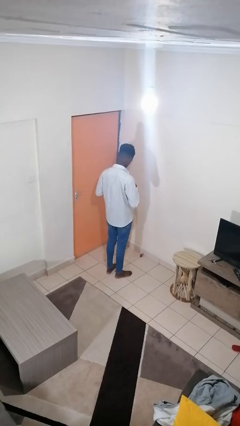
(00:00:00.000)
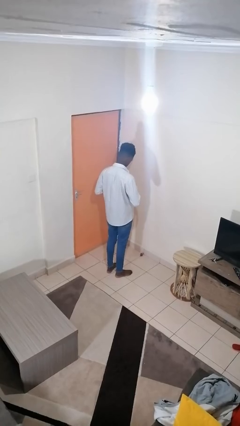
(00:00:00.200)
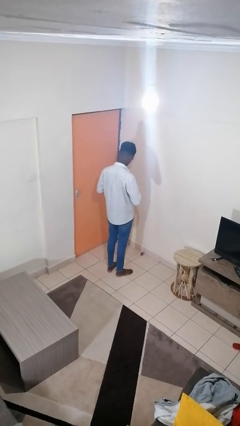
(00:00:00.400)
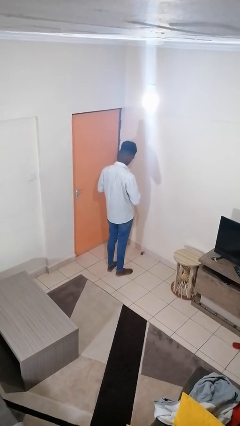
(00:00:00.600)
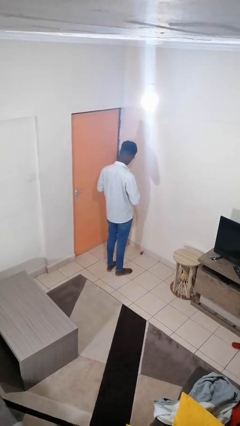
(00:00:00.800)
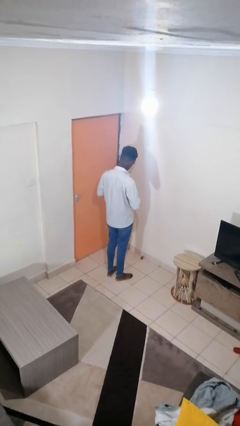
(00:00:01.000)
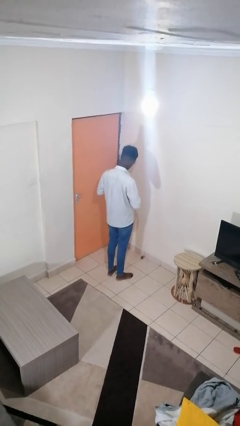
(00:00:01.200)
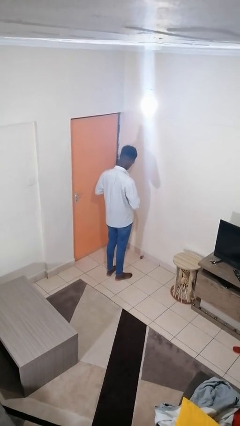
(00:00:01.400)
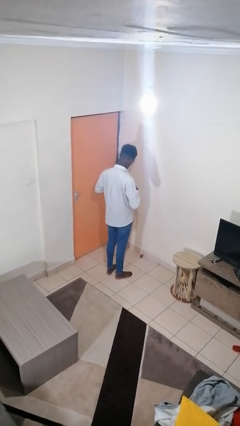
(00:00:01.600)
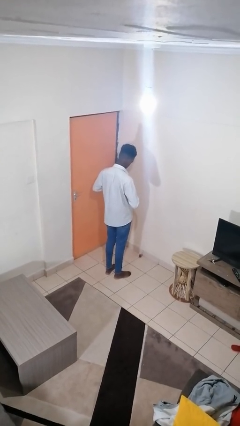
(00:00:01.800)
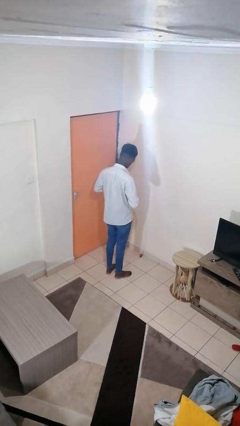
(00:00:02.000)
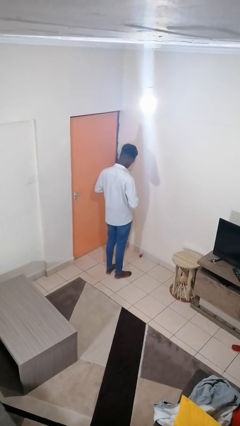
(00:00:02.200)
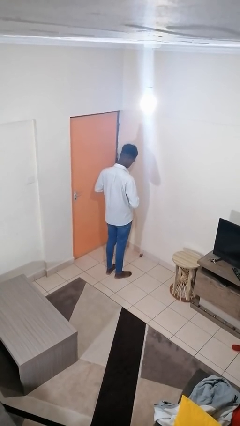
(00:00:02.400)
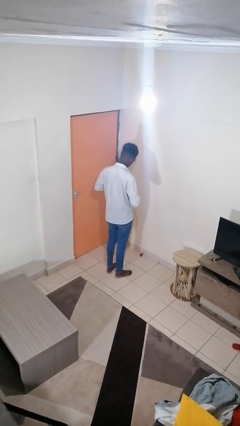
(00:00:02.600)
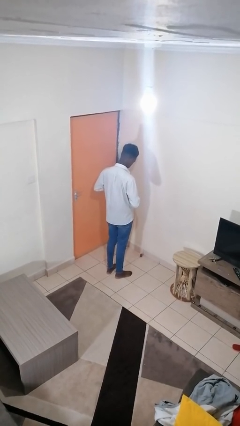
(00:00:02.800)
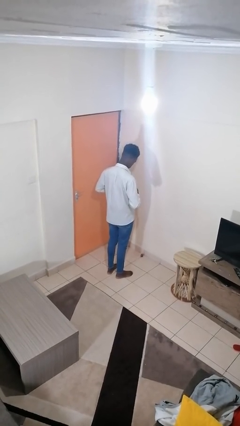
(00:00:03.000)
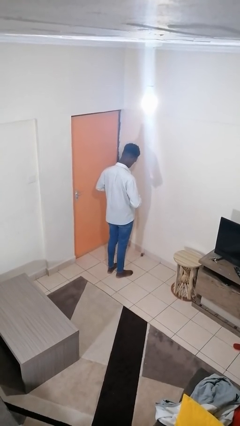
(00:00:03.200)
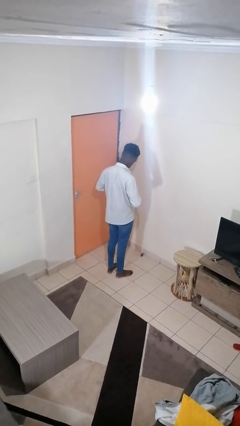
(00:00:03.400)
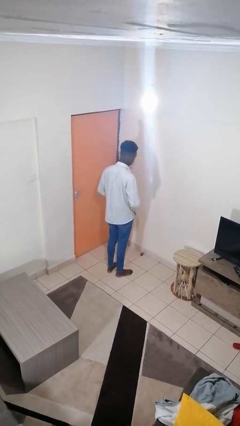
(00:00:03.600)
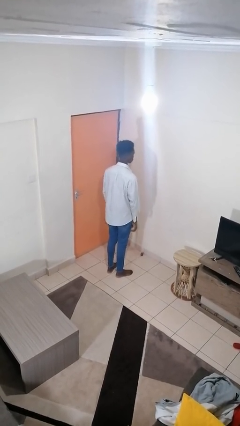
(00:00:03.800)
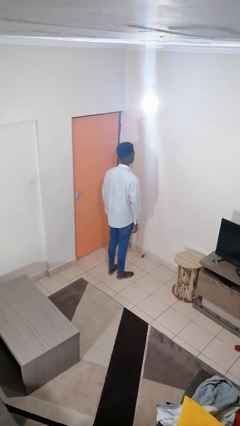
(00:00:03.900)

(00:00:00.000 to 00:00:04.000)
person buttons shirt

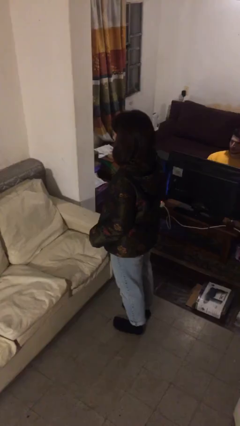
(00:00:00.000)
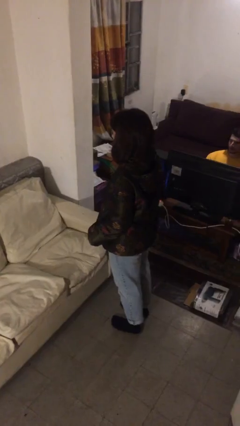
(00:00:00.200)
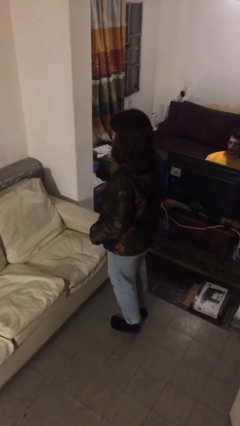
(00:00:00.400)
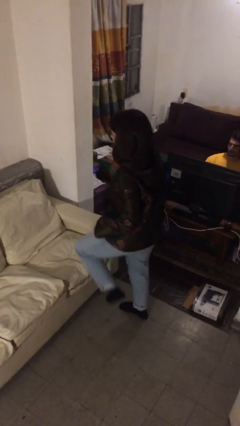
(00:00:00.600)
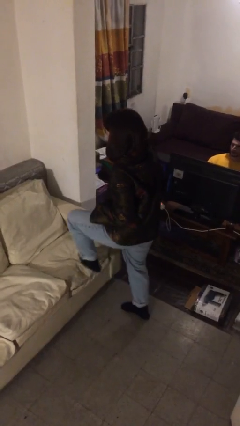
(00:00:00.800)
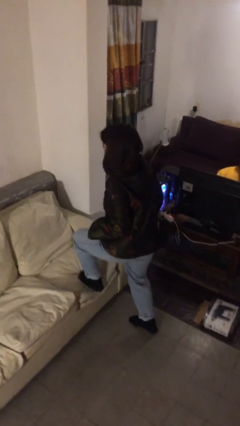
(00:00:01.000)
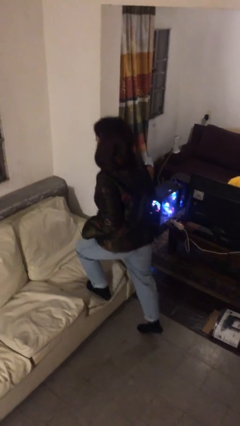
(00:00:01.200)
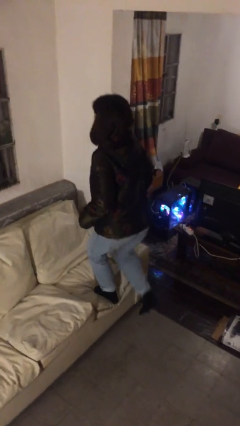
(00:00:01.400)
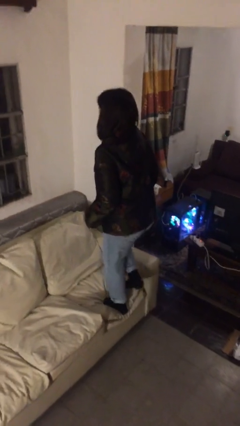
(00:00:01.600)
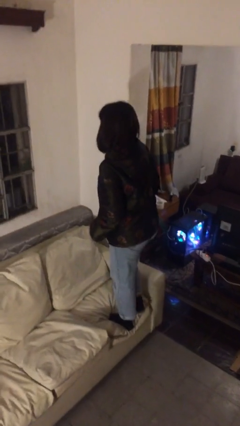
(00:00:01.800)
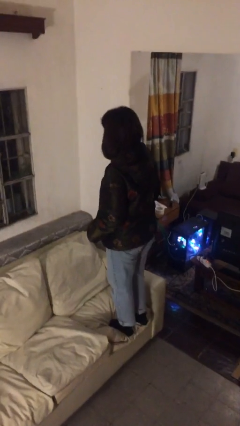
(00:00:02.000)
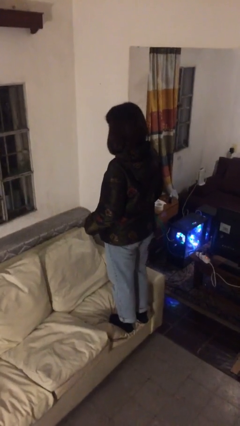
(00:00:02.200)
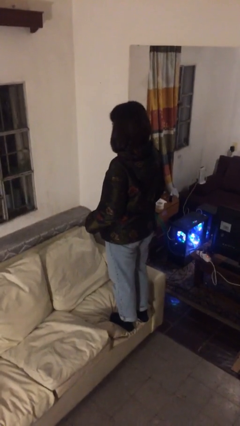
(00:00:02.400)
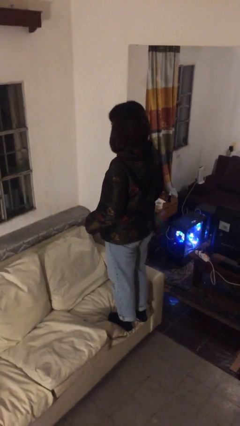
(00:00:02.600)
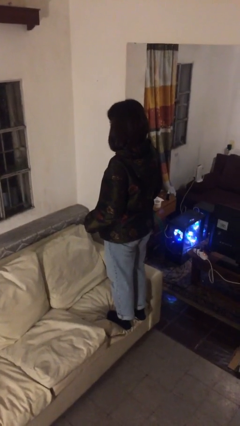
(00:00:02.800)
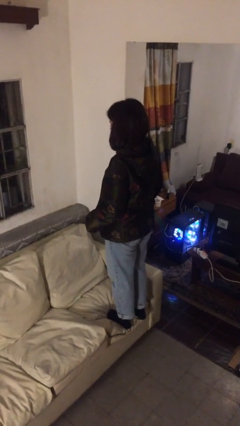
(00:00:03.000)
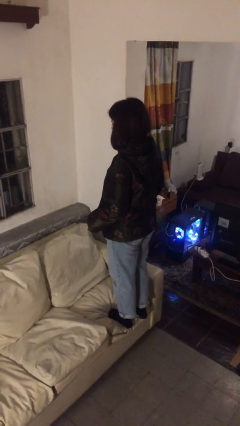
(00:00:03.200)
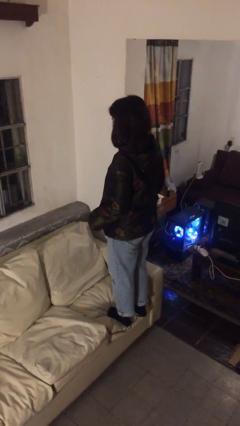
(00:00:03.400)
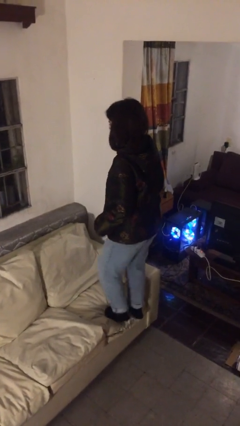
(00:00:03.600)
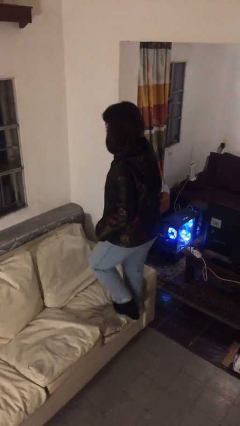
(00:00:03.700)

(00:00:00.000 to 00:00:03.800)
person climbs on couch

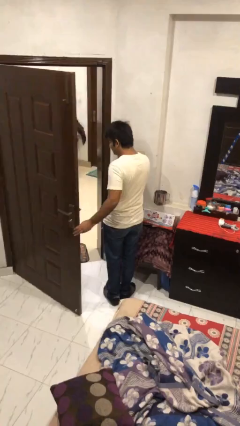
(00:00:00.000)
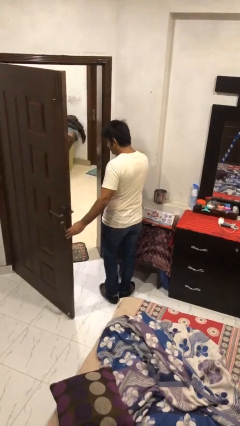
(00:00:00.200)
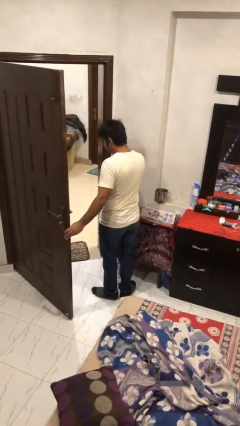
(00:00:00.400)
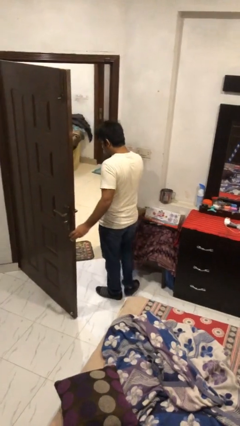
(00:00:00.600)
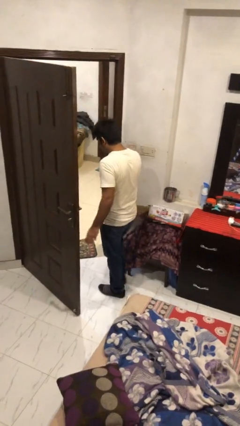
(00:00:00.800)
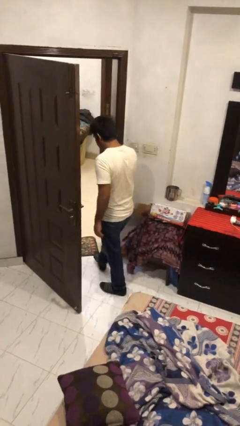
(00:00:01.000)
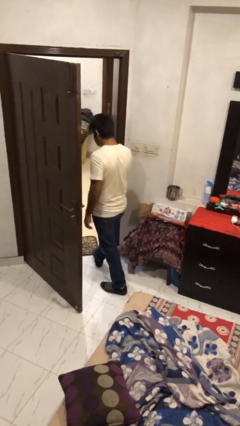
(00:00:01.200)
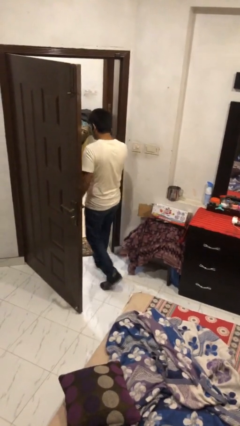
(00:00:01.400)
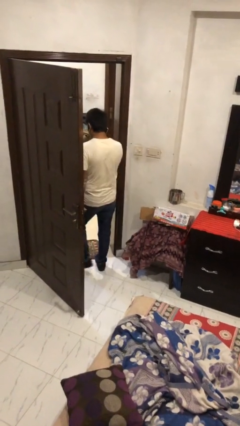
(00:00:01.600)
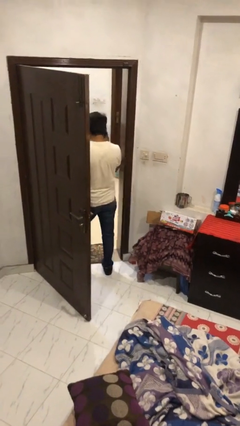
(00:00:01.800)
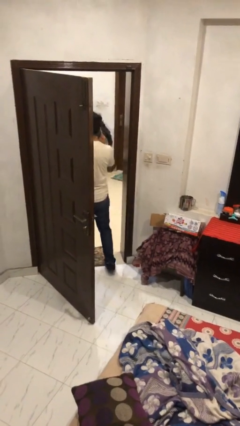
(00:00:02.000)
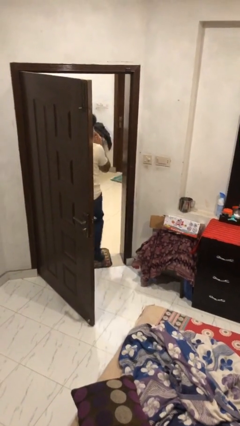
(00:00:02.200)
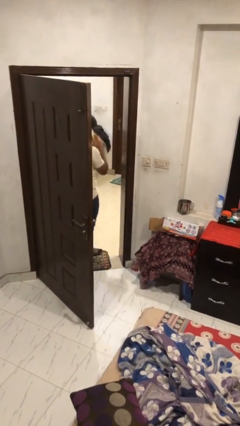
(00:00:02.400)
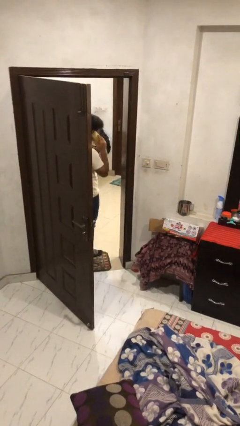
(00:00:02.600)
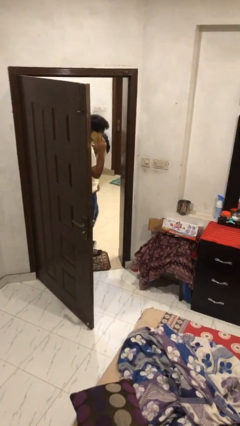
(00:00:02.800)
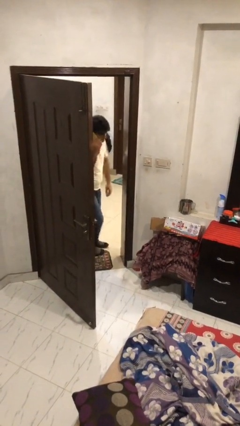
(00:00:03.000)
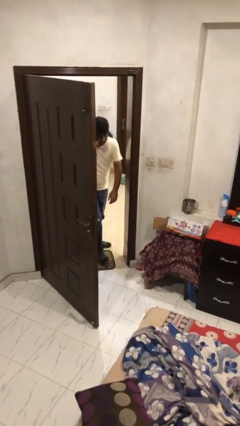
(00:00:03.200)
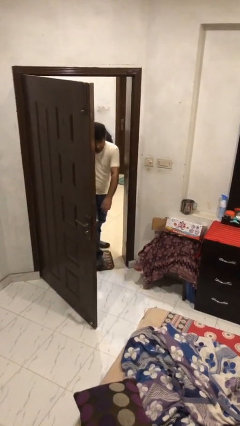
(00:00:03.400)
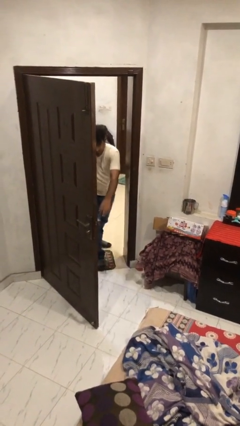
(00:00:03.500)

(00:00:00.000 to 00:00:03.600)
person exits scene through structure

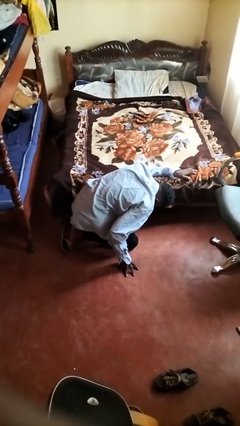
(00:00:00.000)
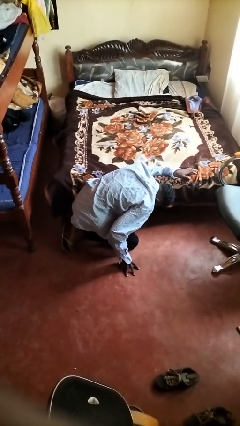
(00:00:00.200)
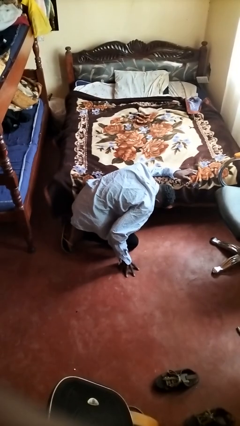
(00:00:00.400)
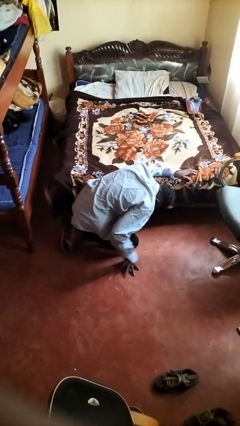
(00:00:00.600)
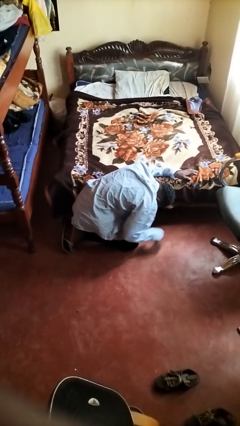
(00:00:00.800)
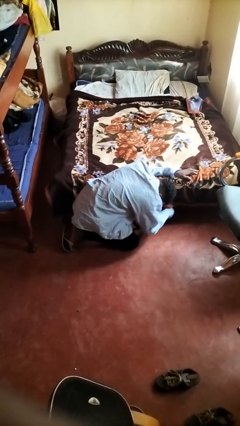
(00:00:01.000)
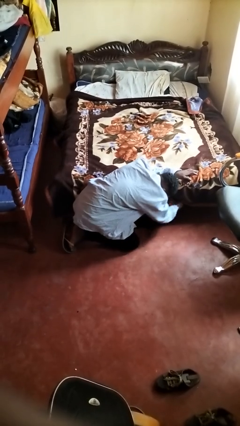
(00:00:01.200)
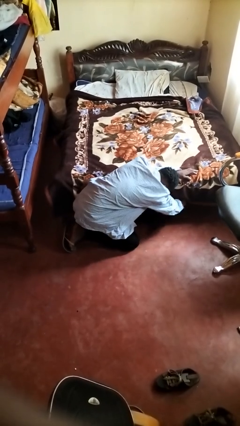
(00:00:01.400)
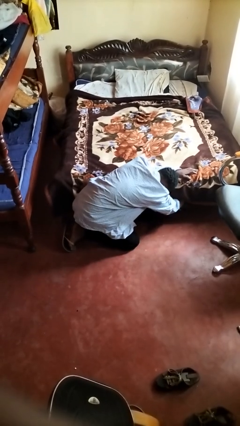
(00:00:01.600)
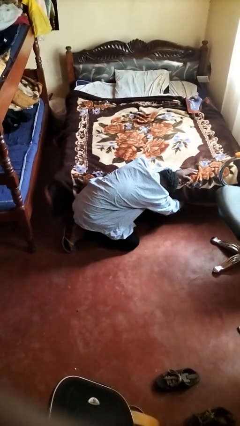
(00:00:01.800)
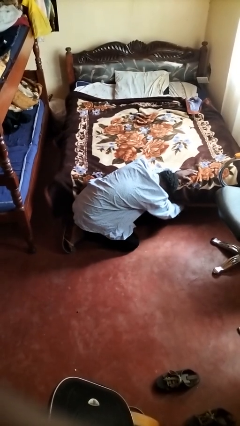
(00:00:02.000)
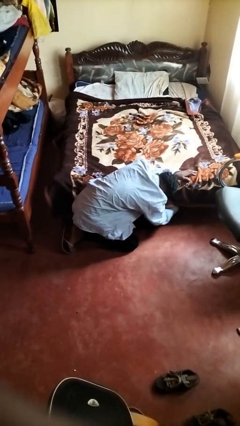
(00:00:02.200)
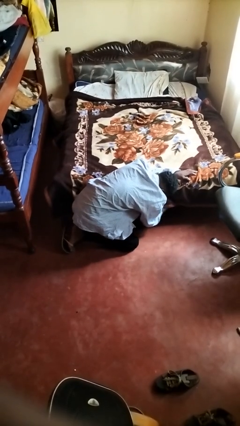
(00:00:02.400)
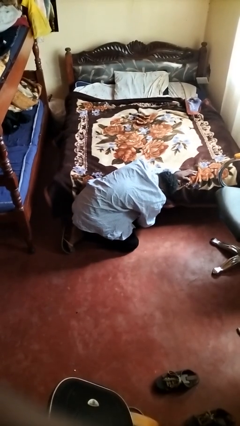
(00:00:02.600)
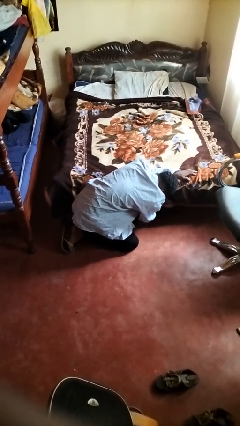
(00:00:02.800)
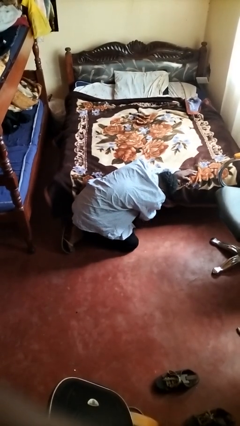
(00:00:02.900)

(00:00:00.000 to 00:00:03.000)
person searches under bed

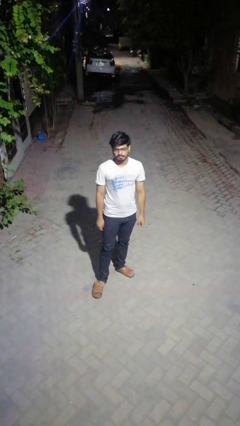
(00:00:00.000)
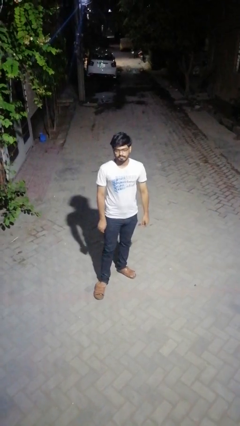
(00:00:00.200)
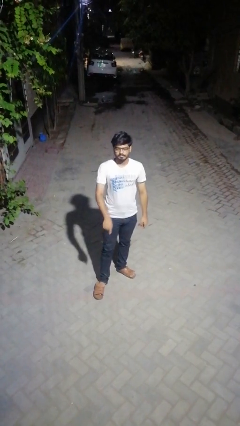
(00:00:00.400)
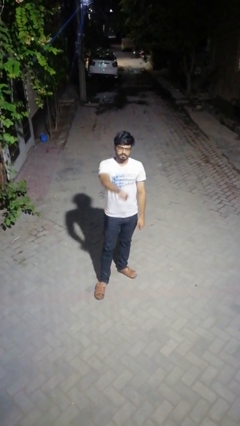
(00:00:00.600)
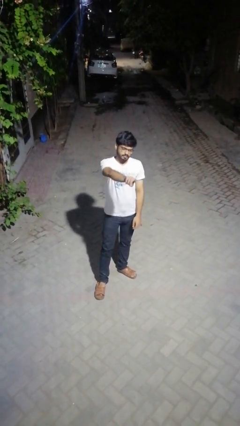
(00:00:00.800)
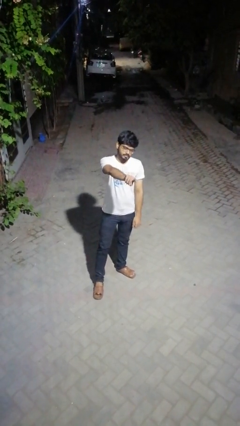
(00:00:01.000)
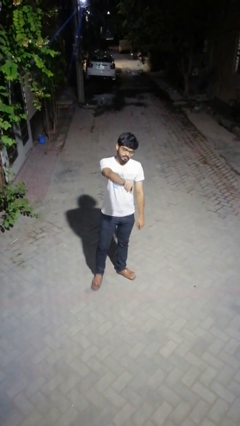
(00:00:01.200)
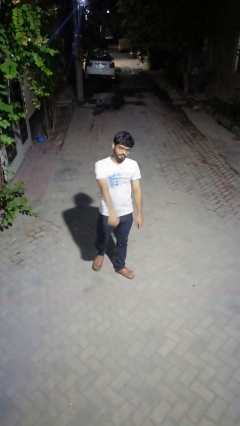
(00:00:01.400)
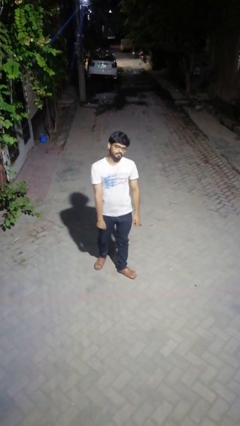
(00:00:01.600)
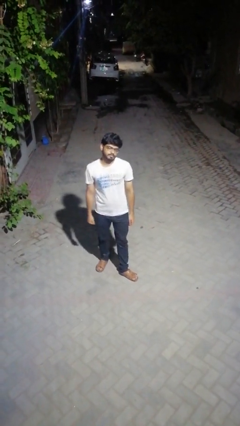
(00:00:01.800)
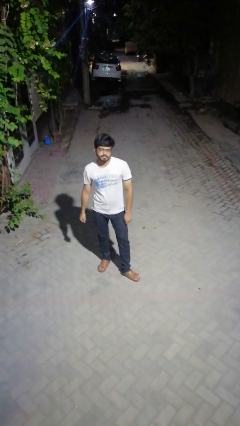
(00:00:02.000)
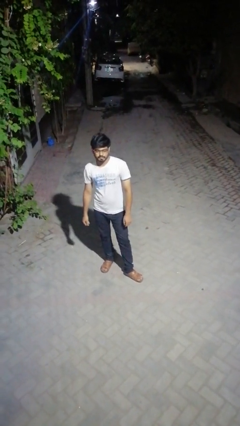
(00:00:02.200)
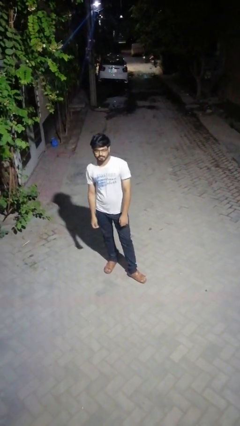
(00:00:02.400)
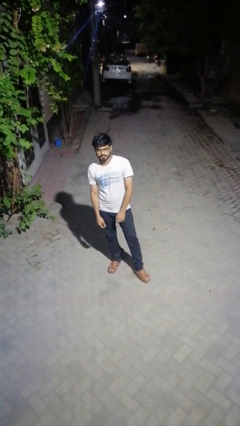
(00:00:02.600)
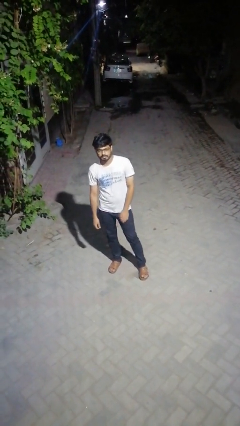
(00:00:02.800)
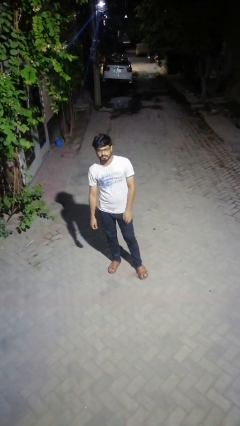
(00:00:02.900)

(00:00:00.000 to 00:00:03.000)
person points at person
